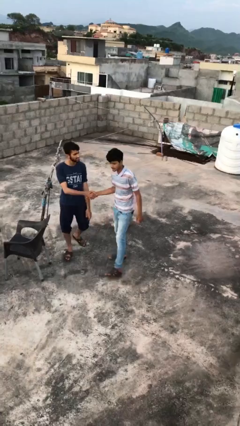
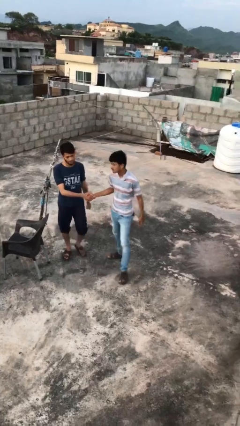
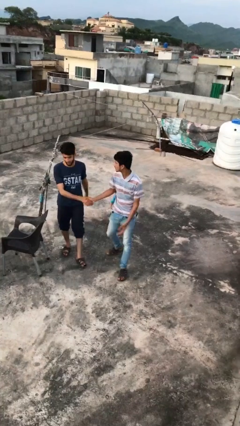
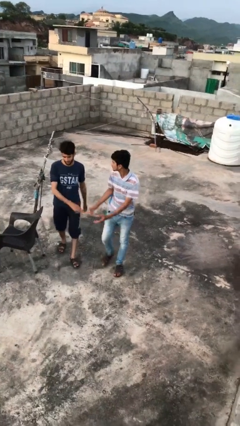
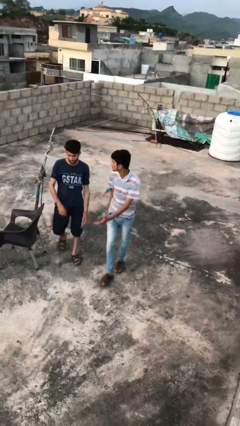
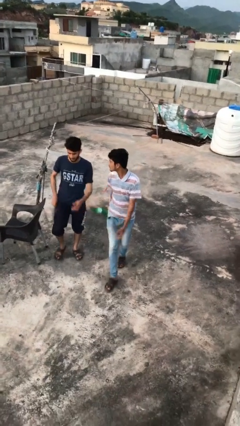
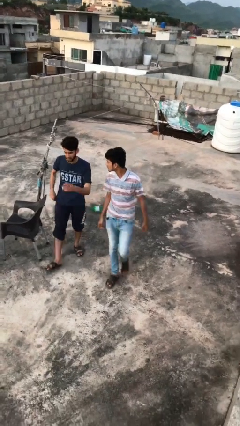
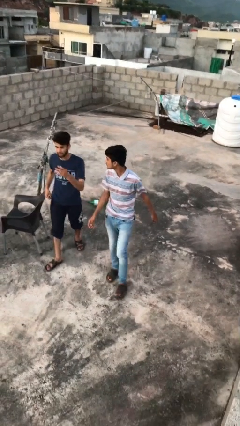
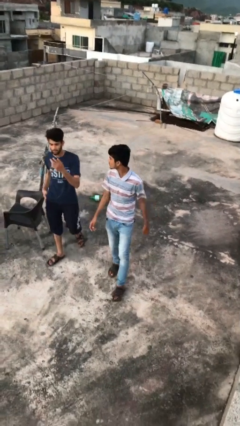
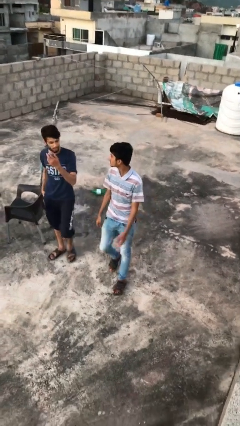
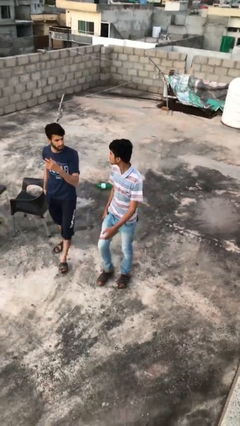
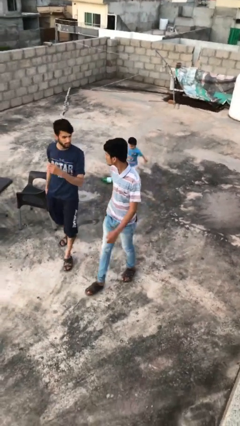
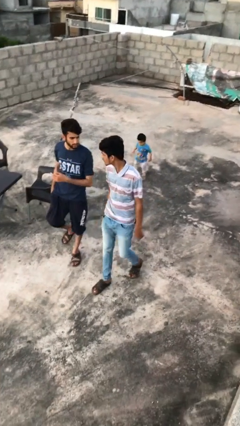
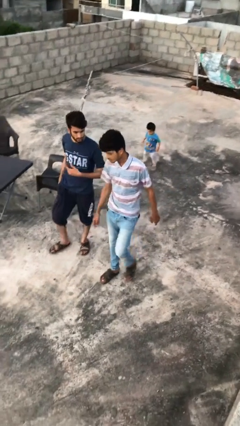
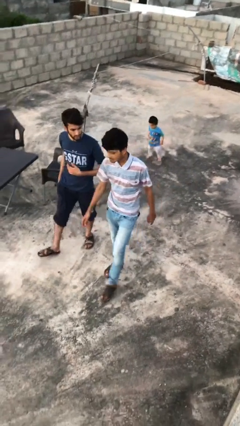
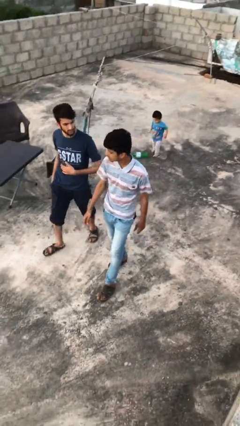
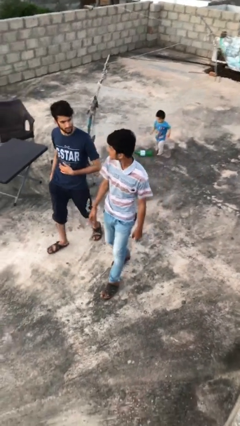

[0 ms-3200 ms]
person talks to person

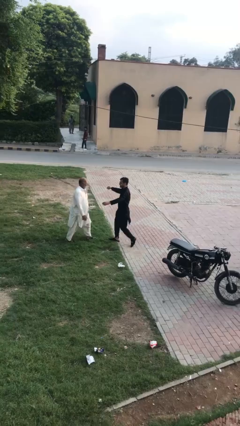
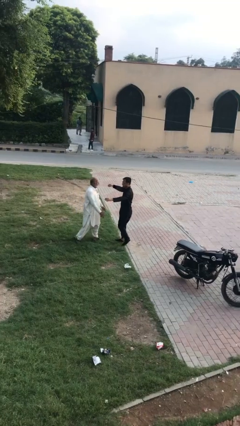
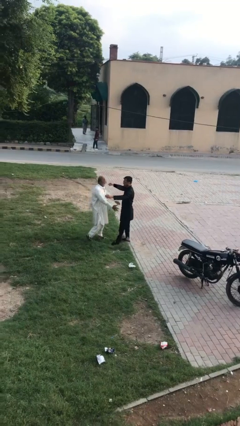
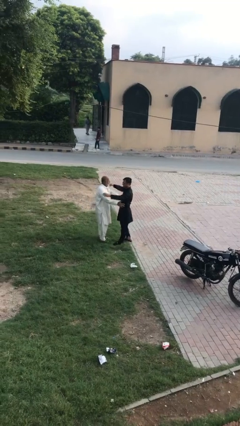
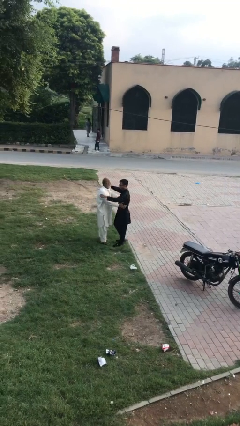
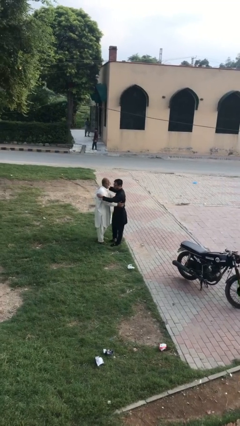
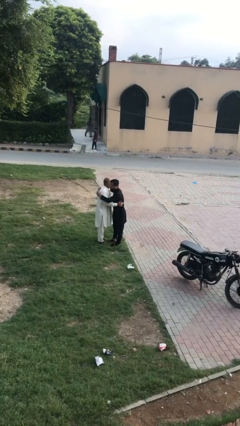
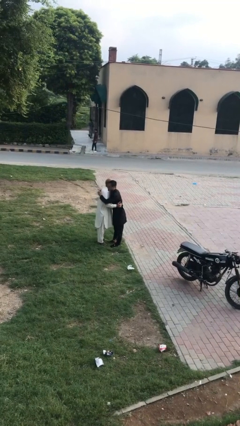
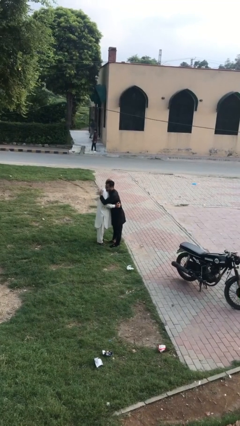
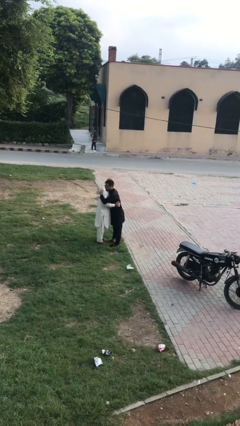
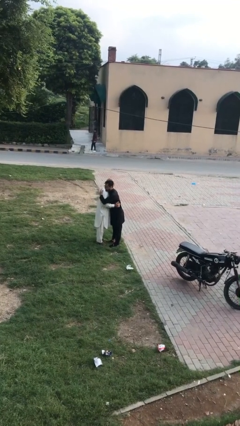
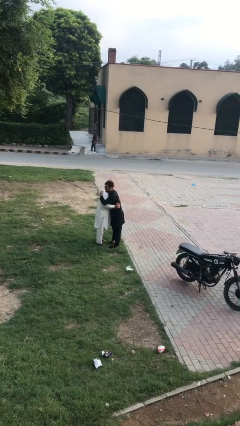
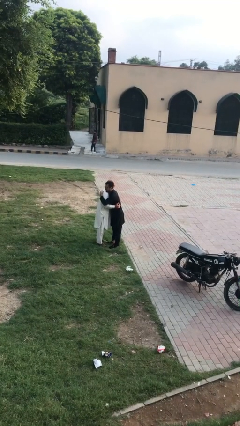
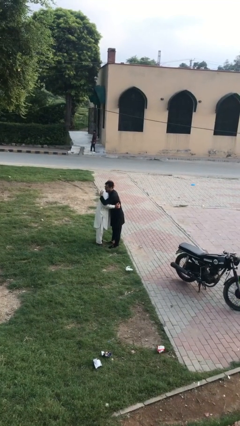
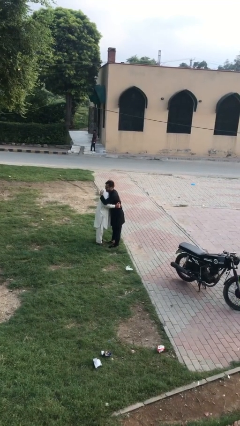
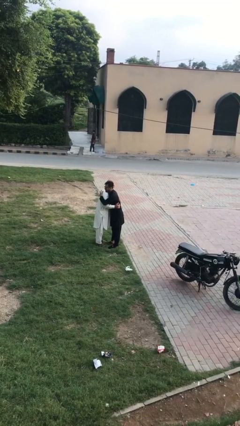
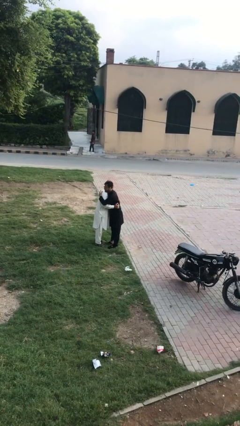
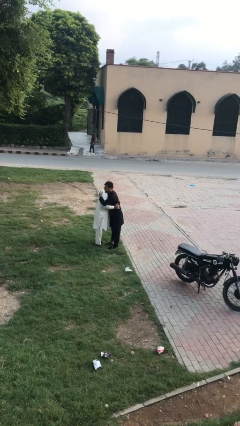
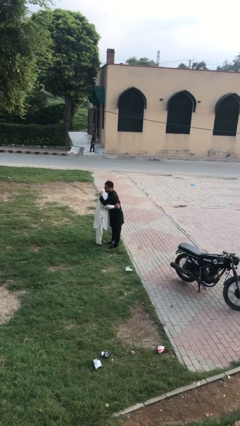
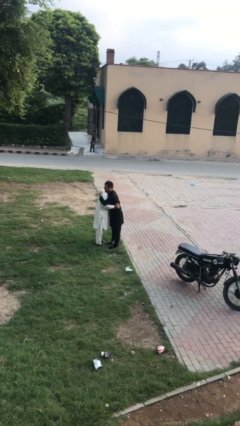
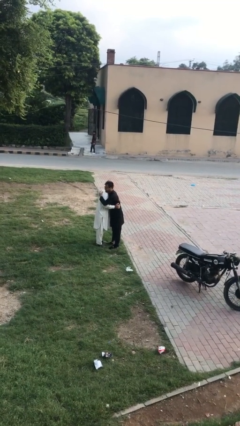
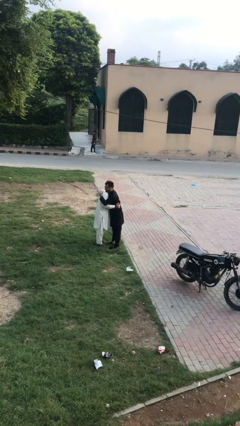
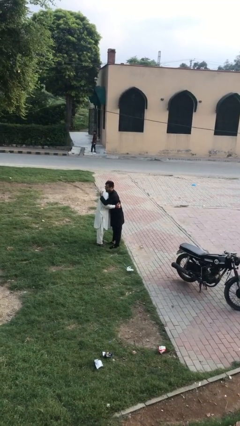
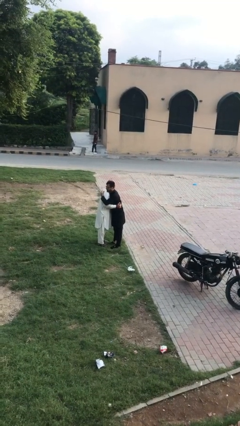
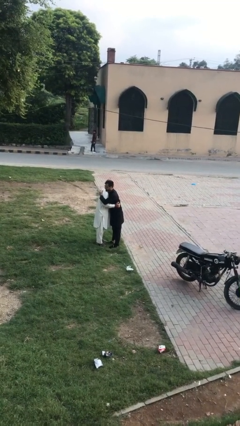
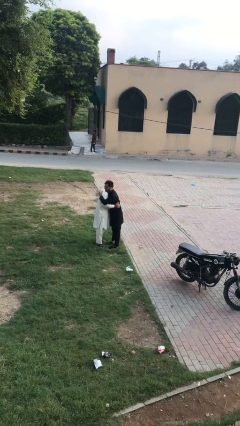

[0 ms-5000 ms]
person embraces person

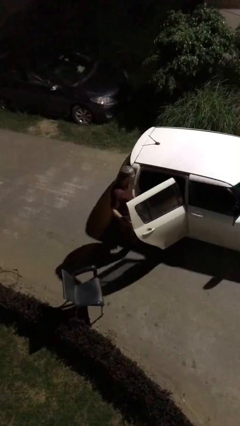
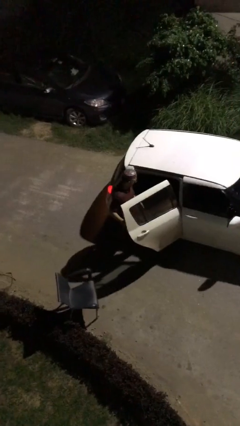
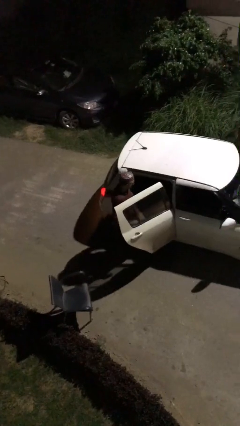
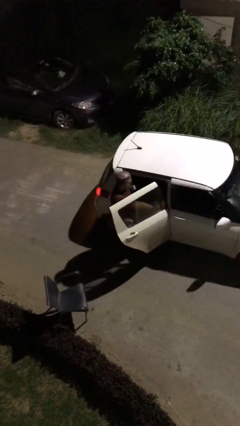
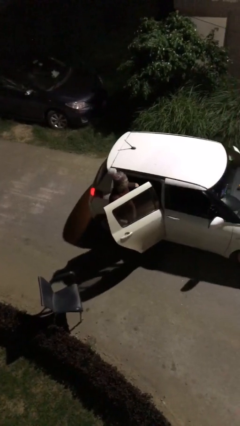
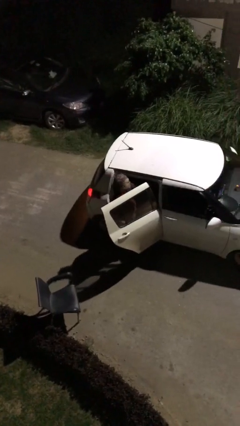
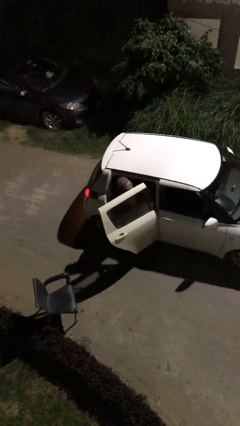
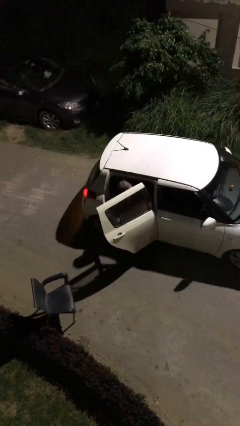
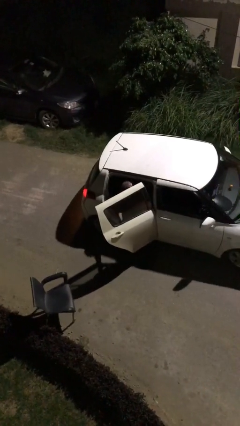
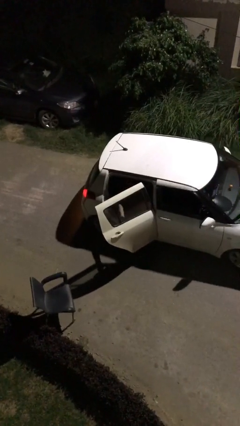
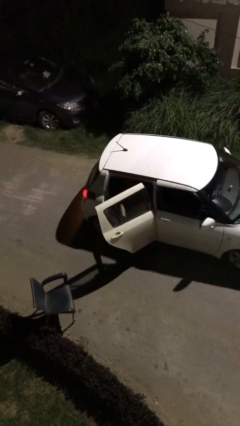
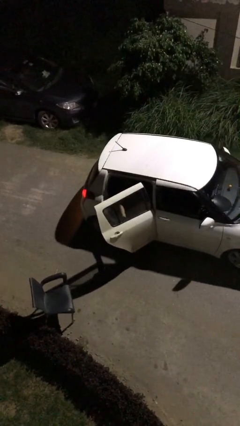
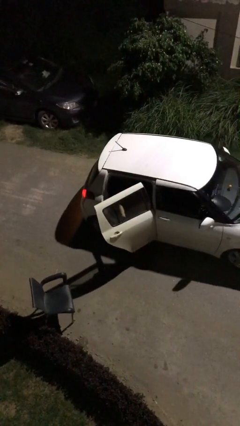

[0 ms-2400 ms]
person enters car

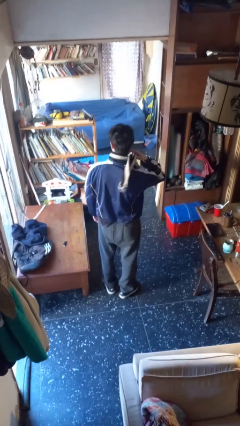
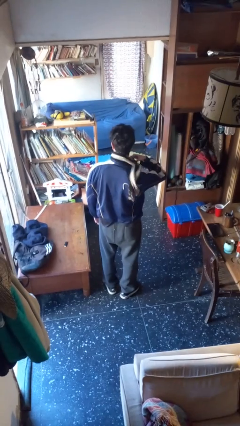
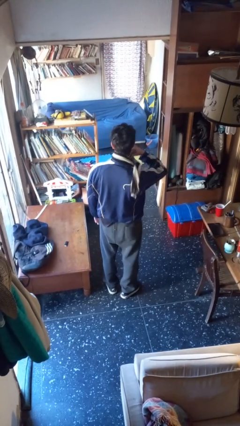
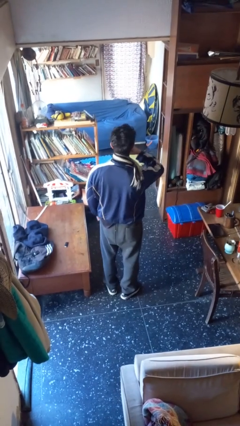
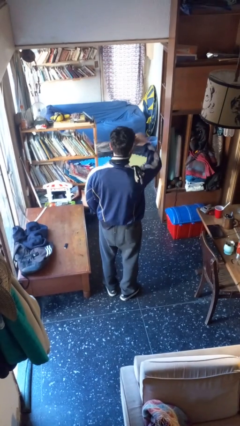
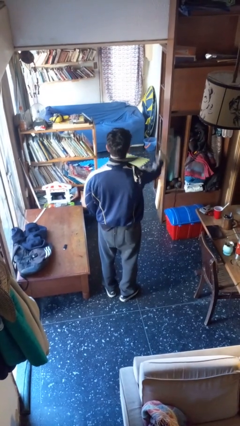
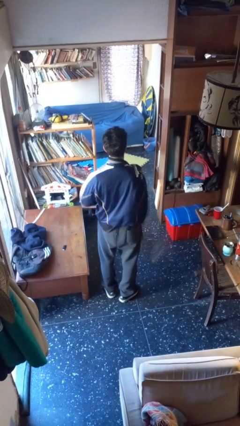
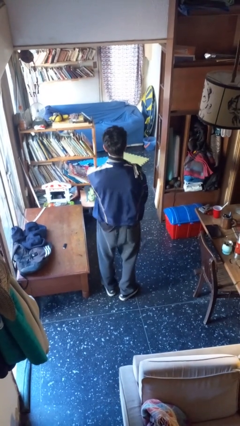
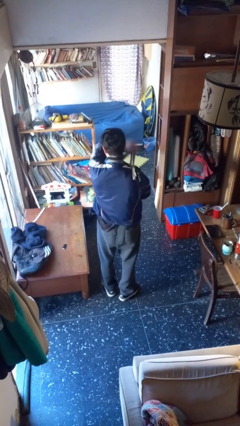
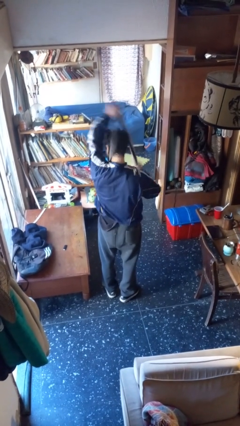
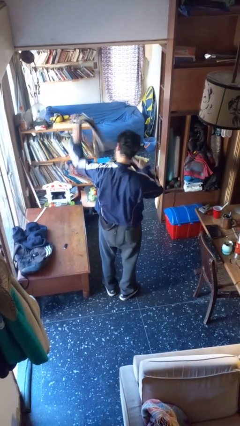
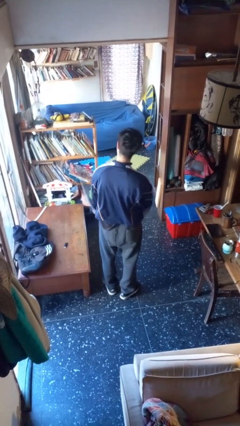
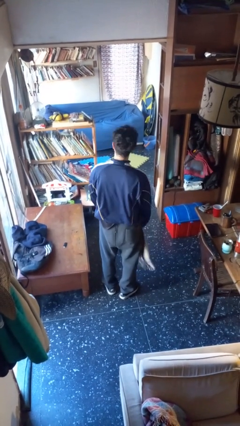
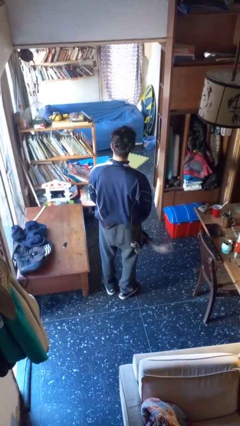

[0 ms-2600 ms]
person takes off scarf

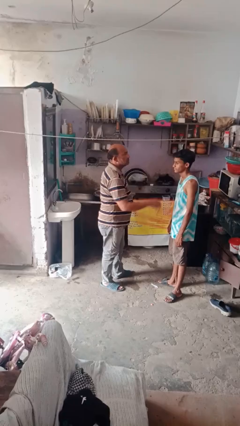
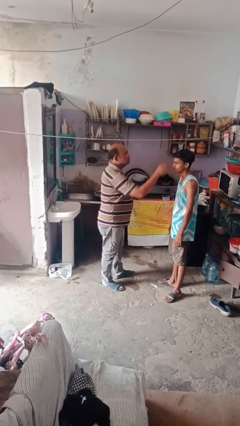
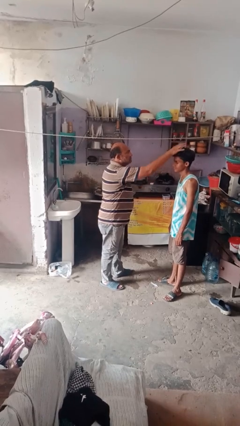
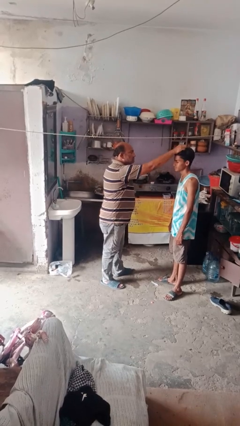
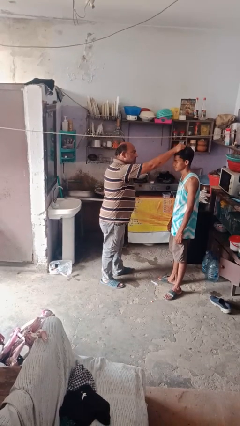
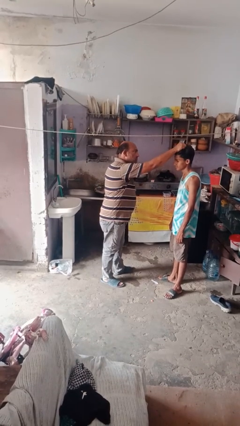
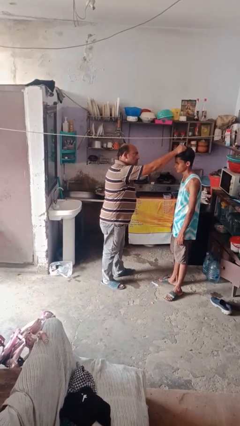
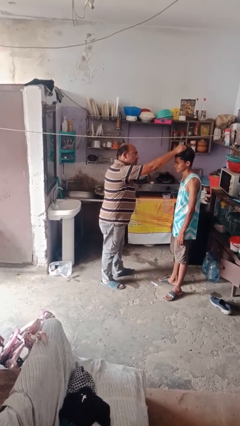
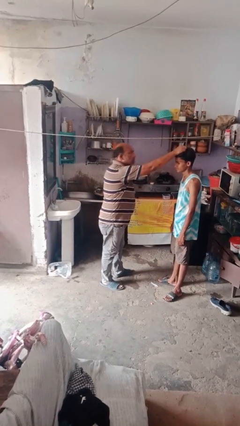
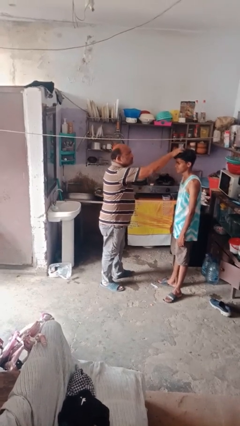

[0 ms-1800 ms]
person grabs person by hair

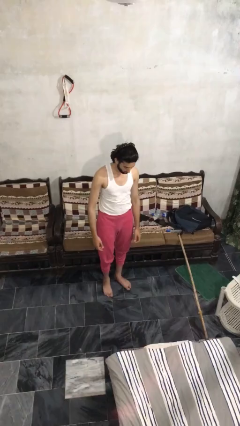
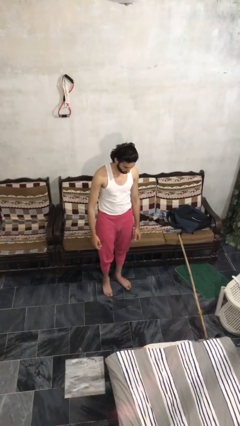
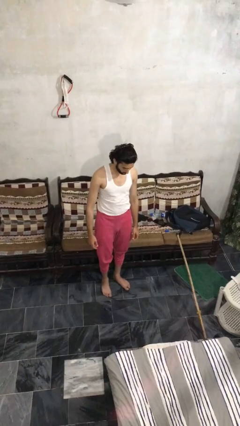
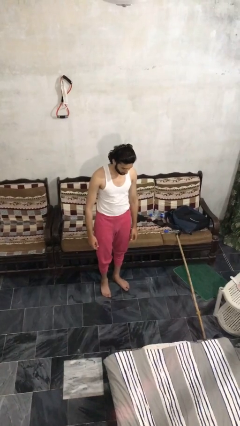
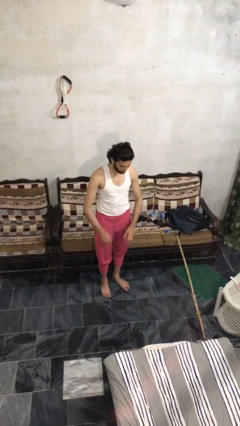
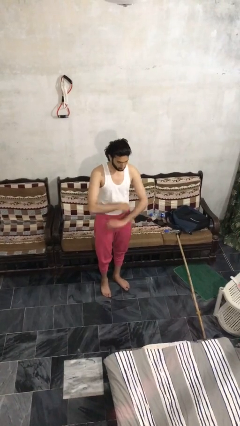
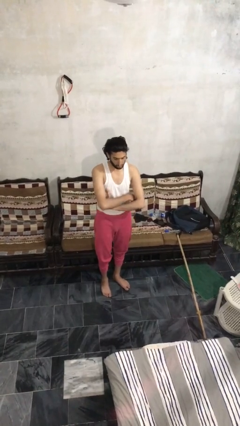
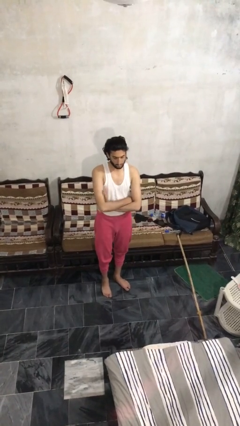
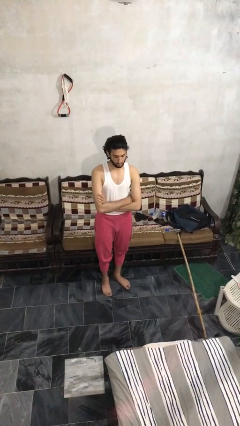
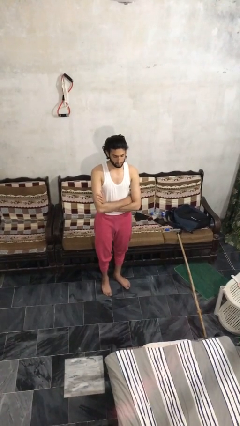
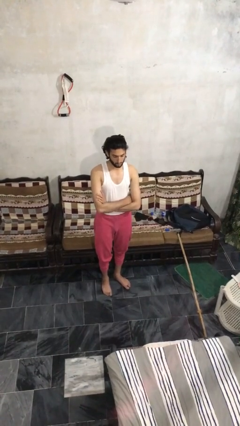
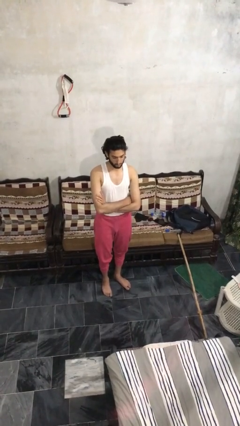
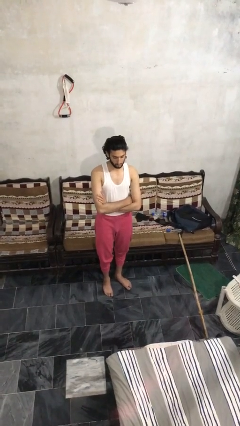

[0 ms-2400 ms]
person crosses arms
